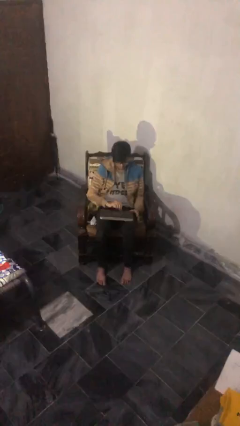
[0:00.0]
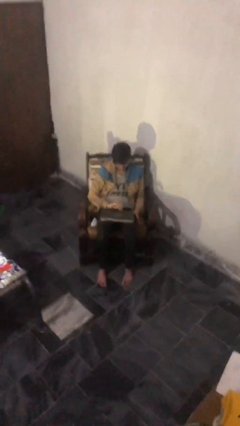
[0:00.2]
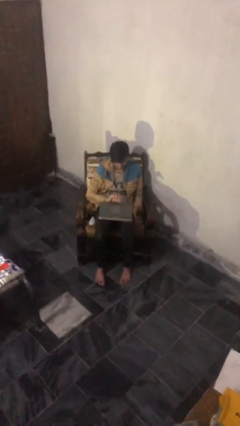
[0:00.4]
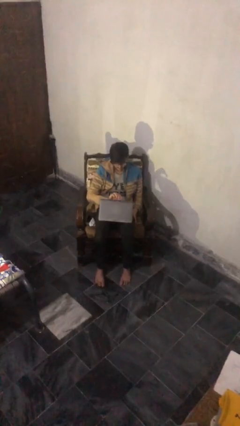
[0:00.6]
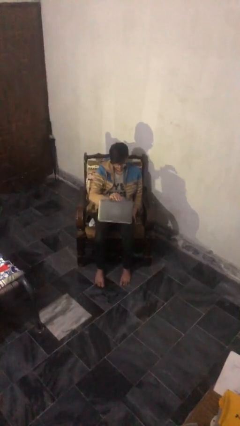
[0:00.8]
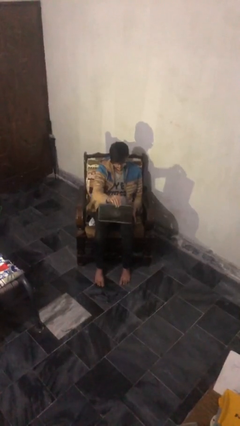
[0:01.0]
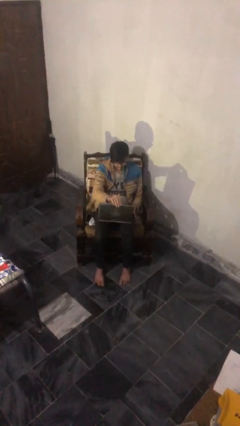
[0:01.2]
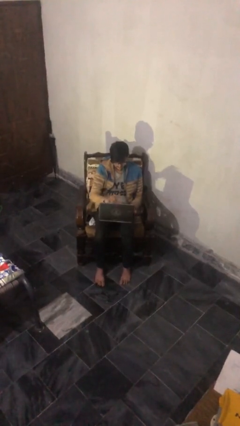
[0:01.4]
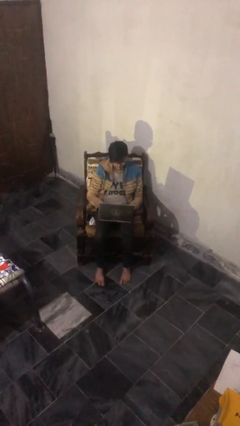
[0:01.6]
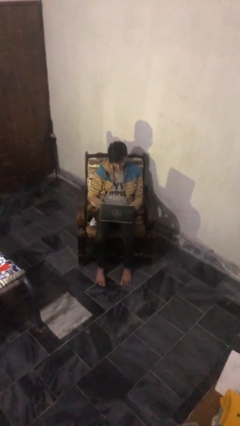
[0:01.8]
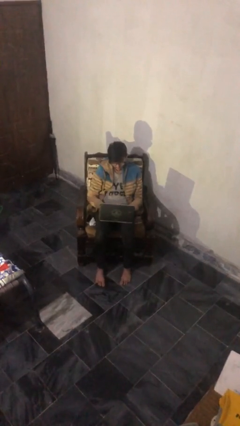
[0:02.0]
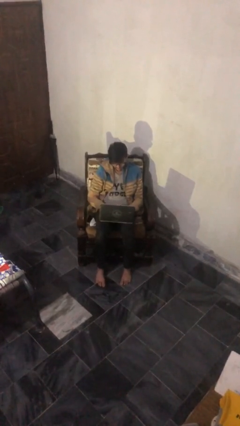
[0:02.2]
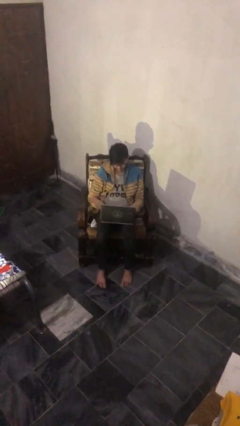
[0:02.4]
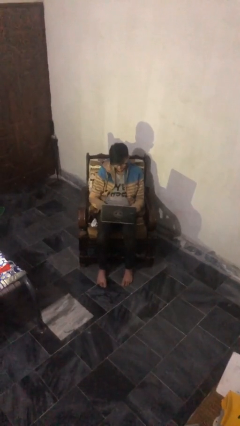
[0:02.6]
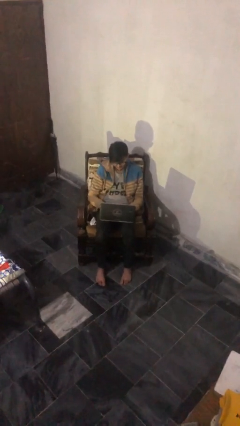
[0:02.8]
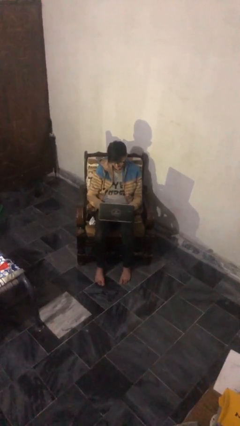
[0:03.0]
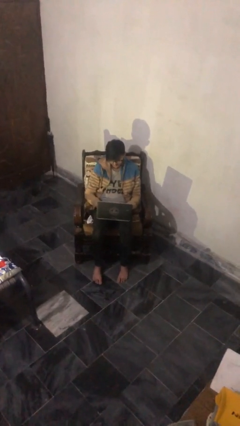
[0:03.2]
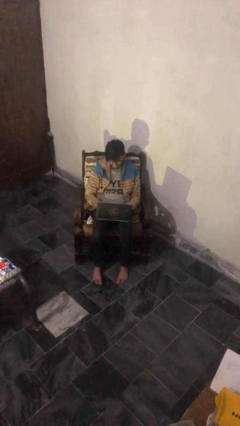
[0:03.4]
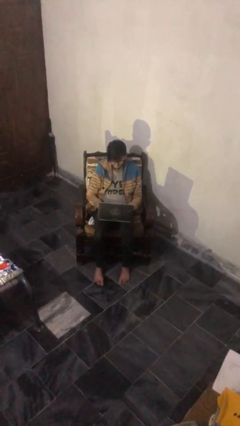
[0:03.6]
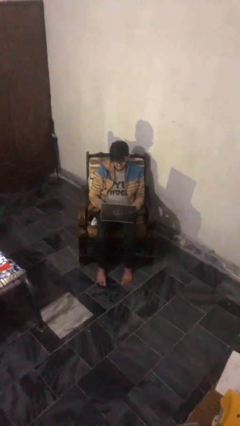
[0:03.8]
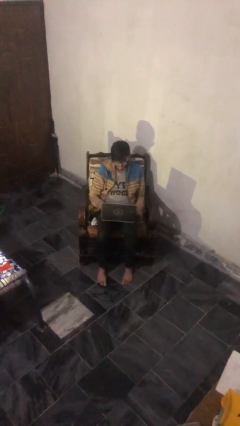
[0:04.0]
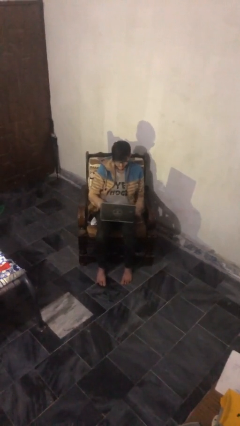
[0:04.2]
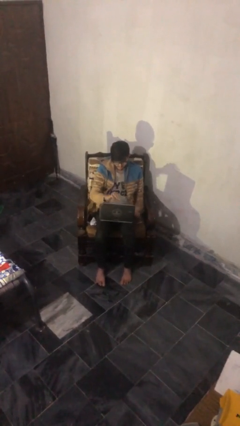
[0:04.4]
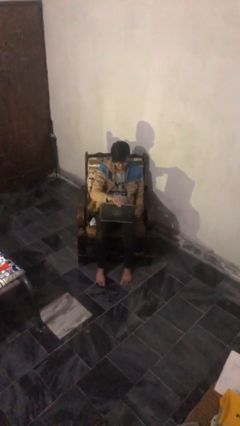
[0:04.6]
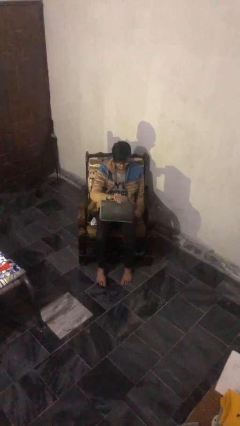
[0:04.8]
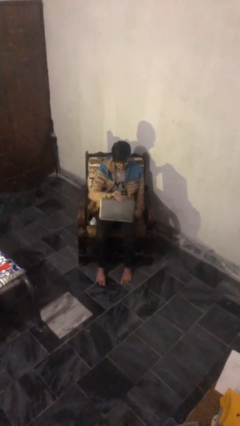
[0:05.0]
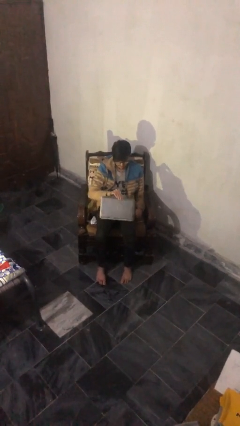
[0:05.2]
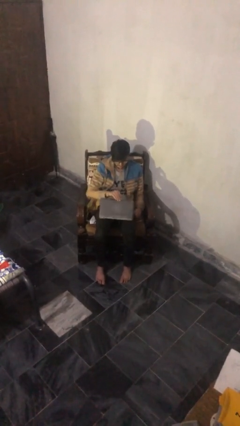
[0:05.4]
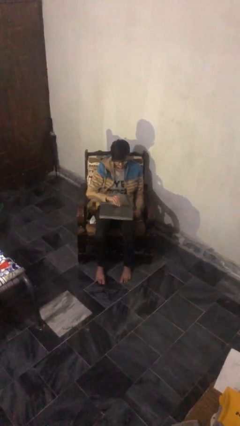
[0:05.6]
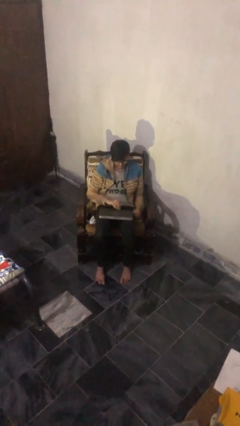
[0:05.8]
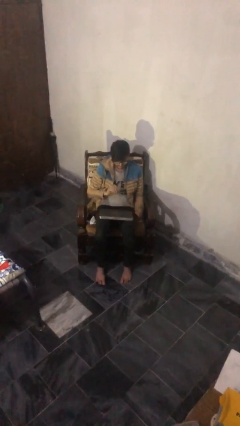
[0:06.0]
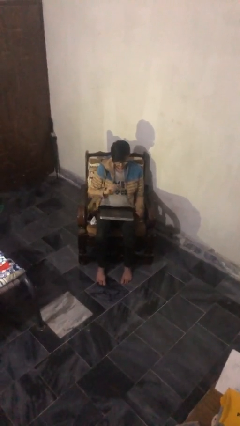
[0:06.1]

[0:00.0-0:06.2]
person interacts with laptop

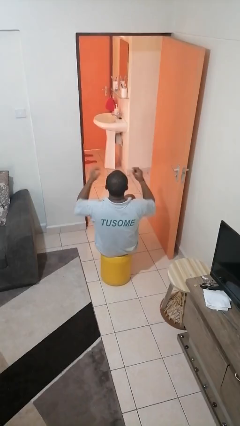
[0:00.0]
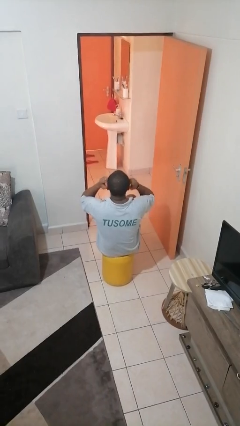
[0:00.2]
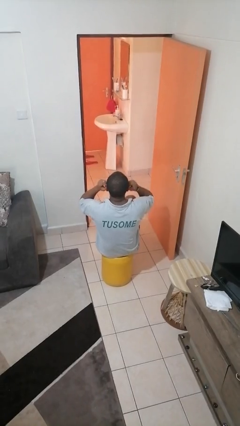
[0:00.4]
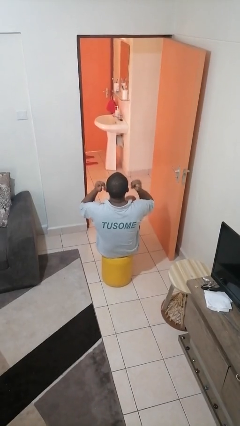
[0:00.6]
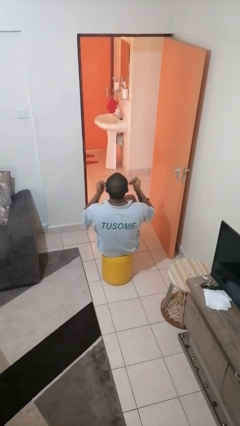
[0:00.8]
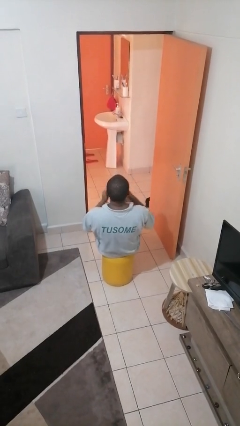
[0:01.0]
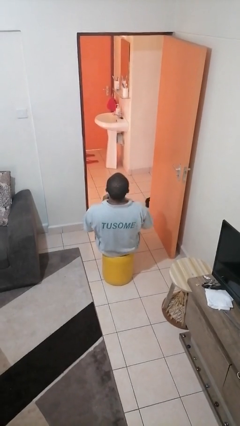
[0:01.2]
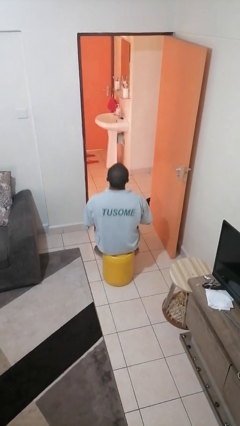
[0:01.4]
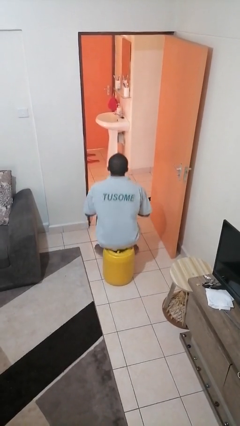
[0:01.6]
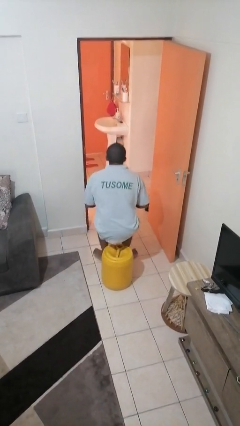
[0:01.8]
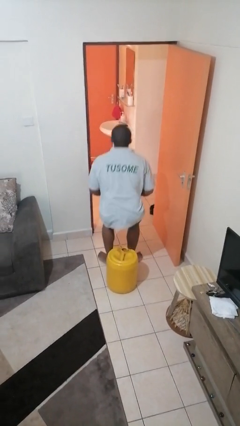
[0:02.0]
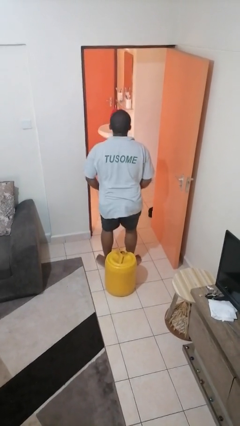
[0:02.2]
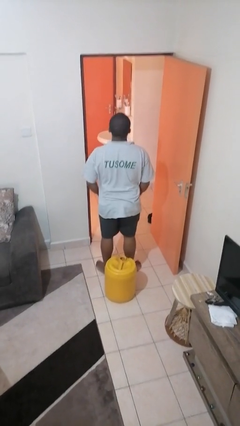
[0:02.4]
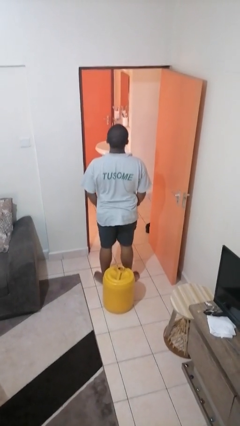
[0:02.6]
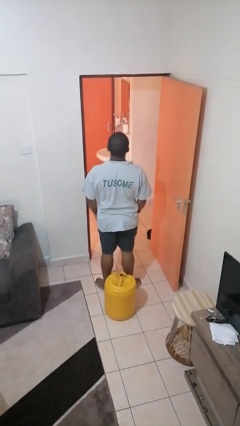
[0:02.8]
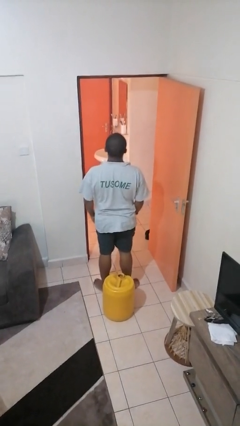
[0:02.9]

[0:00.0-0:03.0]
person takes off facemask

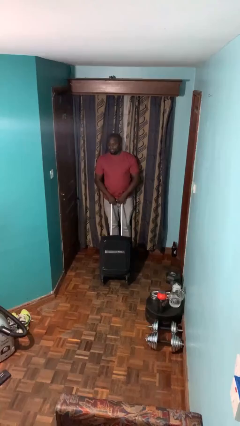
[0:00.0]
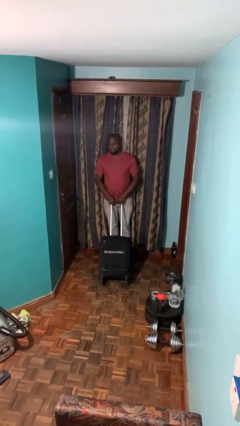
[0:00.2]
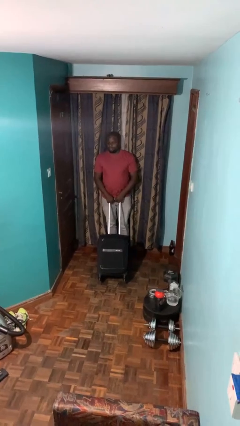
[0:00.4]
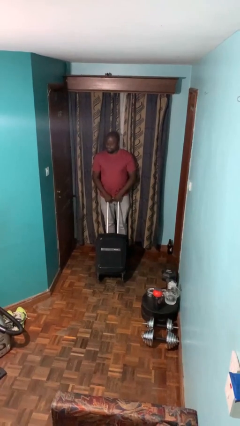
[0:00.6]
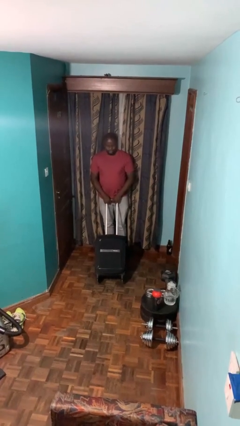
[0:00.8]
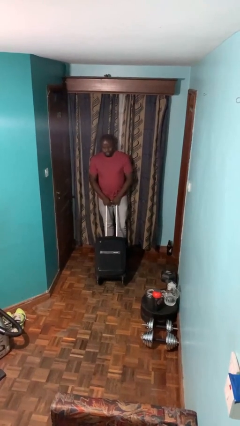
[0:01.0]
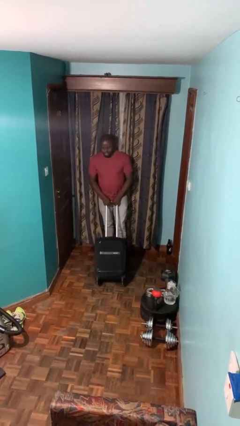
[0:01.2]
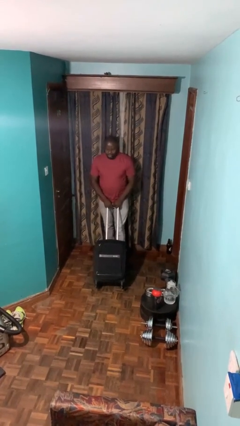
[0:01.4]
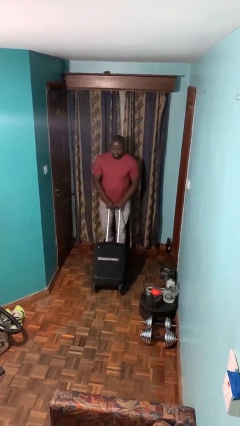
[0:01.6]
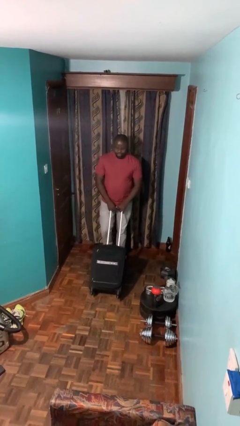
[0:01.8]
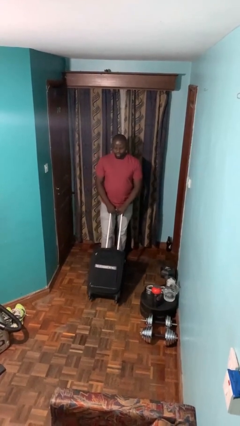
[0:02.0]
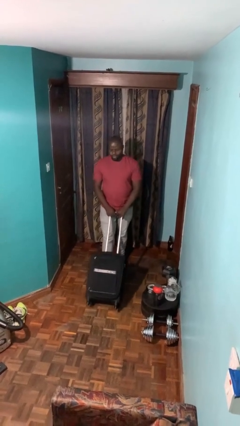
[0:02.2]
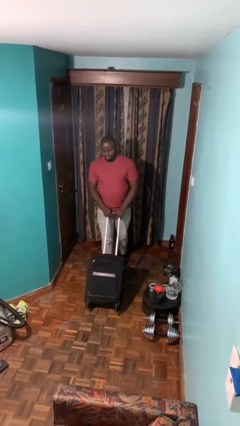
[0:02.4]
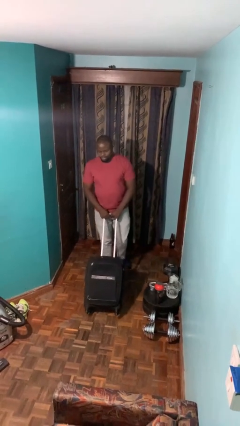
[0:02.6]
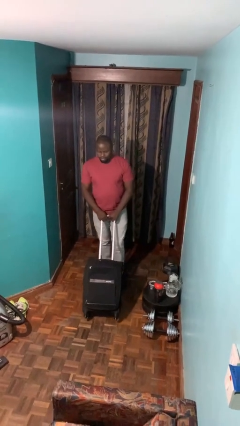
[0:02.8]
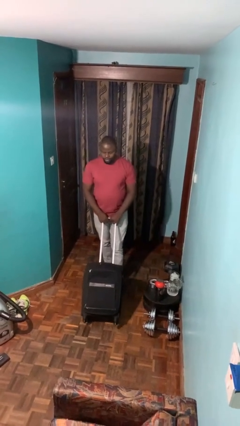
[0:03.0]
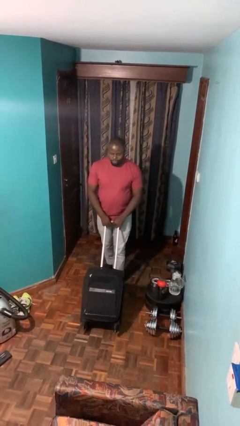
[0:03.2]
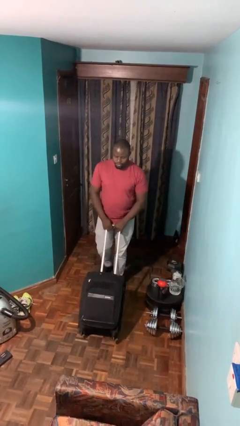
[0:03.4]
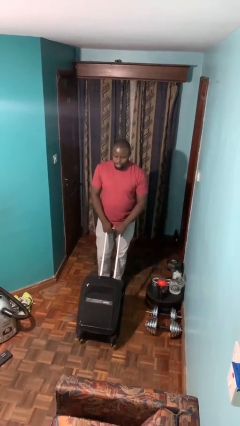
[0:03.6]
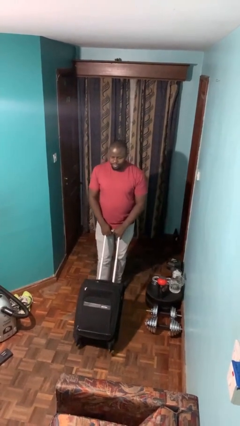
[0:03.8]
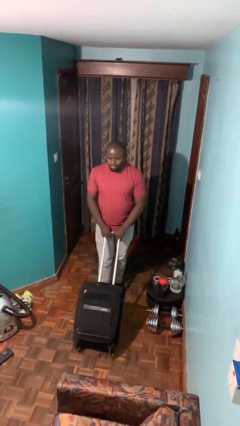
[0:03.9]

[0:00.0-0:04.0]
person pushes wheeled cart

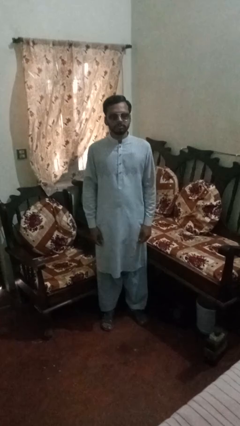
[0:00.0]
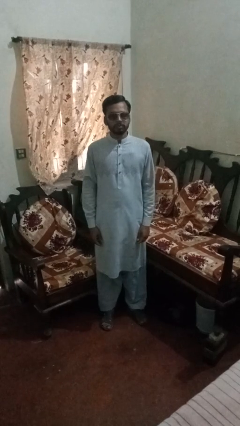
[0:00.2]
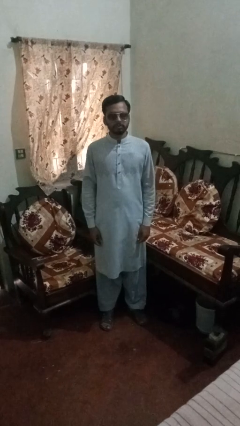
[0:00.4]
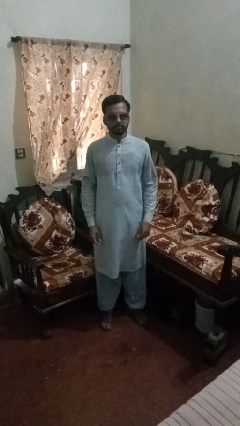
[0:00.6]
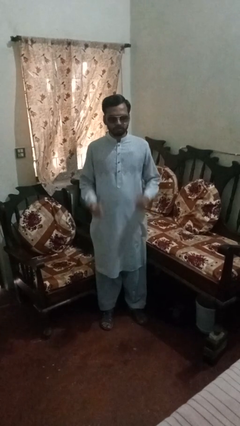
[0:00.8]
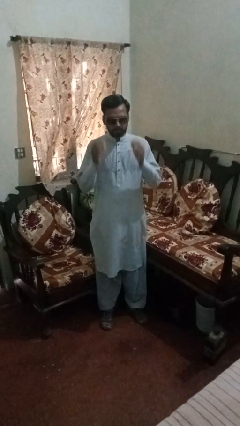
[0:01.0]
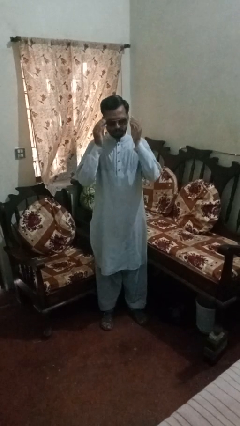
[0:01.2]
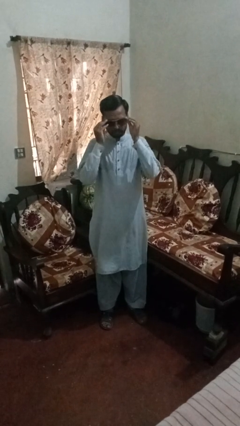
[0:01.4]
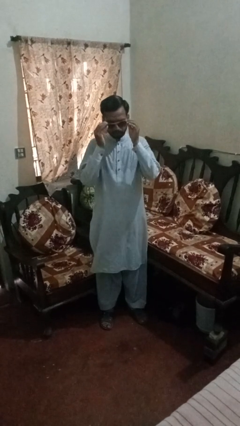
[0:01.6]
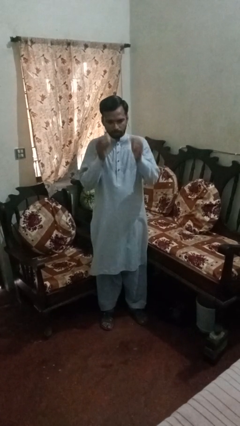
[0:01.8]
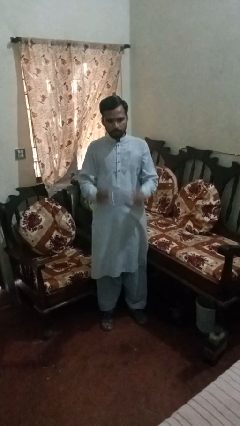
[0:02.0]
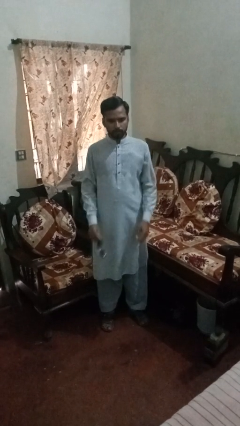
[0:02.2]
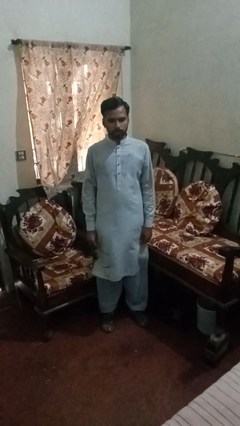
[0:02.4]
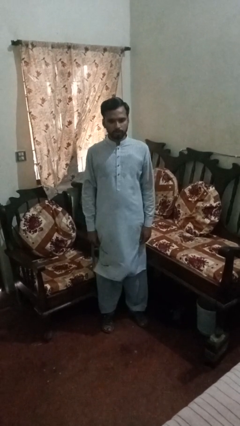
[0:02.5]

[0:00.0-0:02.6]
person takes off sunglasses

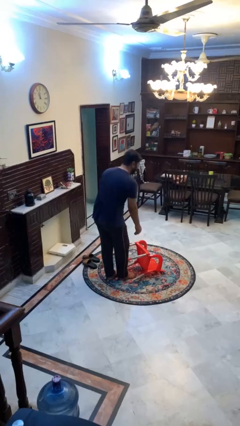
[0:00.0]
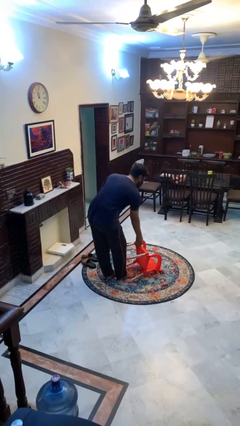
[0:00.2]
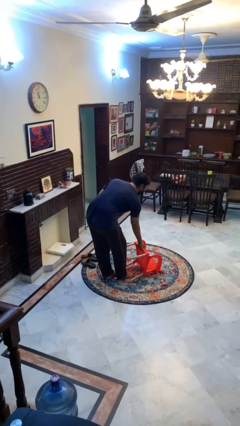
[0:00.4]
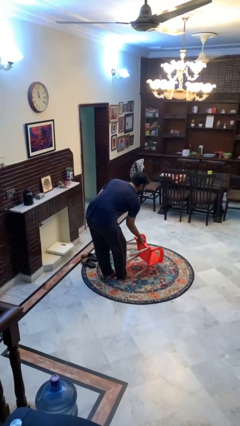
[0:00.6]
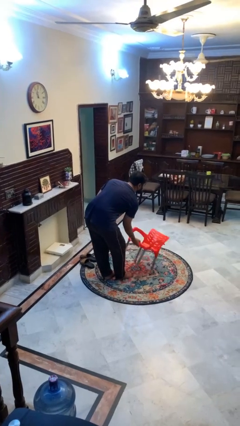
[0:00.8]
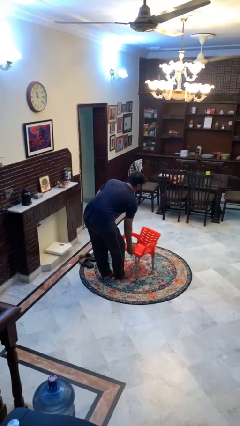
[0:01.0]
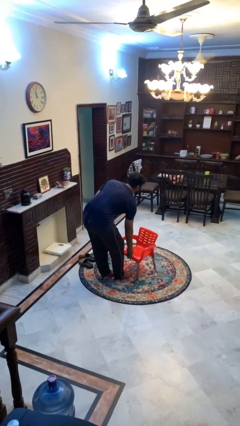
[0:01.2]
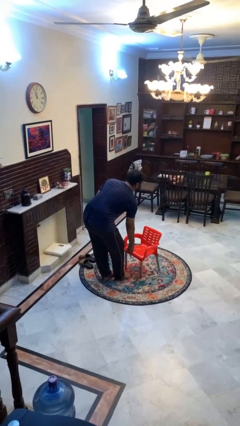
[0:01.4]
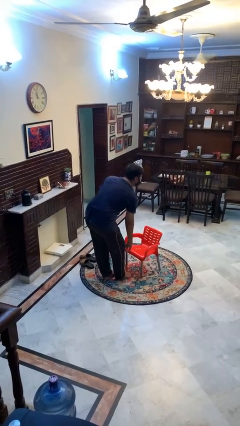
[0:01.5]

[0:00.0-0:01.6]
person sets upright furniture
